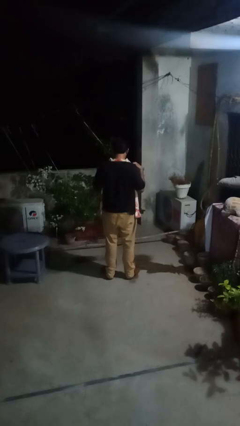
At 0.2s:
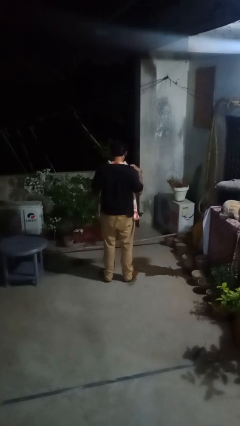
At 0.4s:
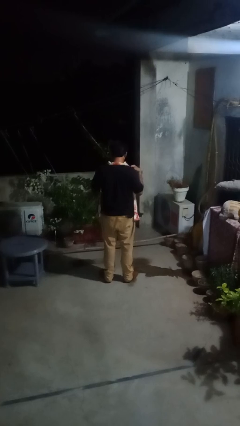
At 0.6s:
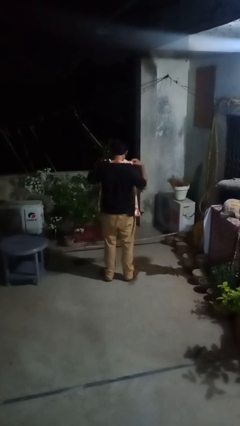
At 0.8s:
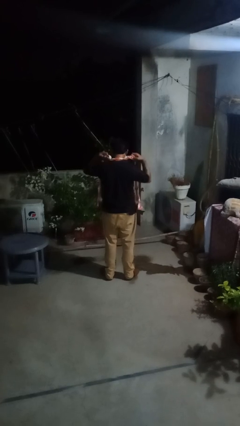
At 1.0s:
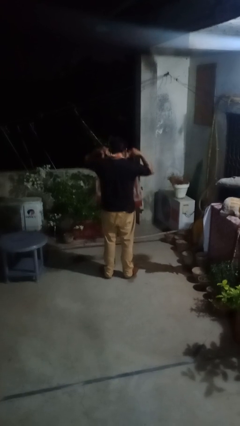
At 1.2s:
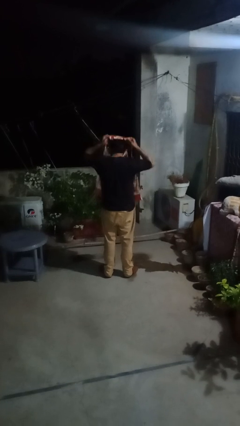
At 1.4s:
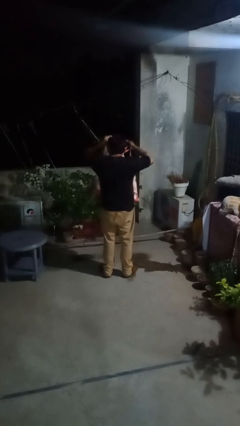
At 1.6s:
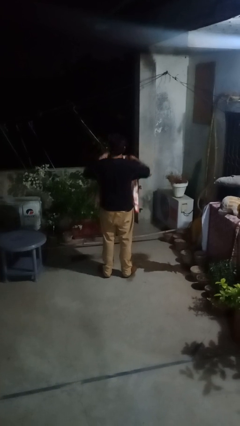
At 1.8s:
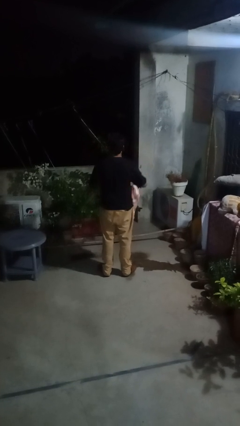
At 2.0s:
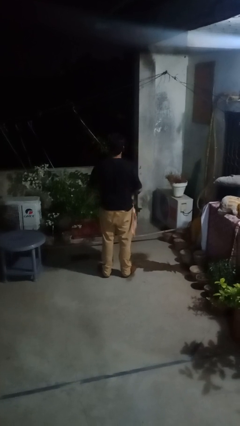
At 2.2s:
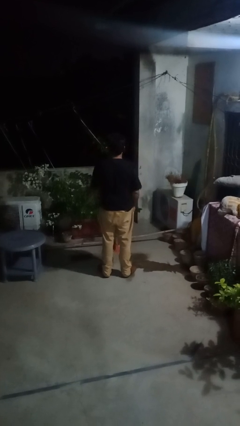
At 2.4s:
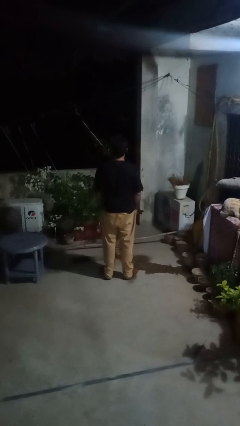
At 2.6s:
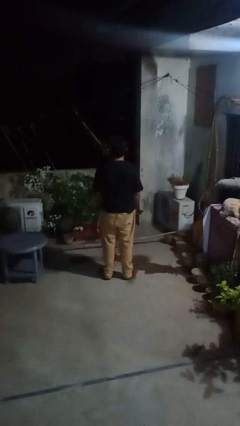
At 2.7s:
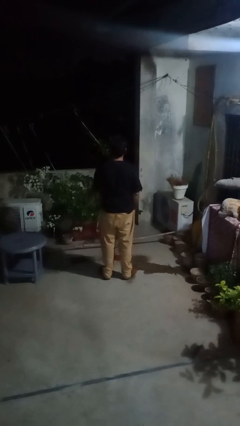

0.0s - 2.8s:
person takes off apron

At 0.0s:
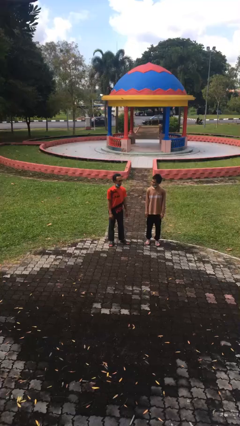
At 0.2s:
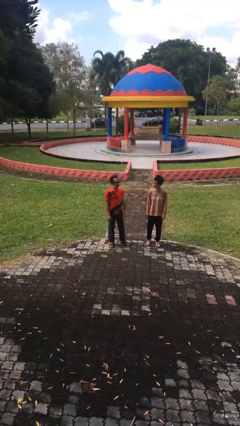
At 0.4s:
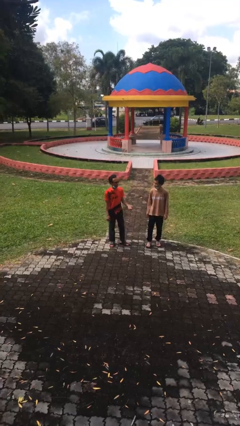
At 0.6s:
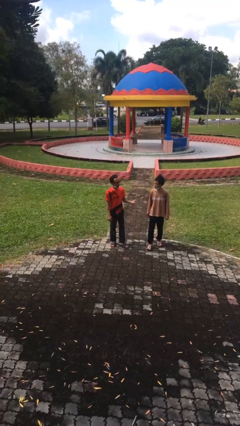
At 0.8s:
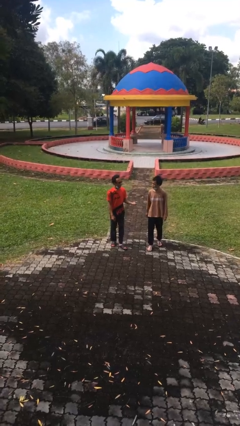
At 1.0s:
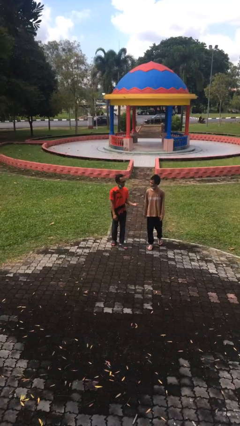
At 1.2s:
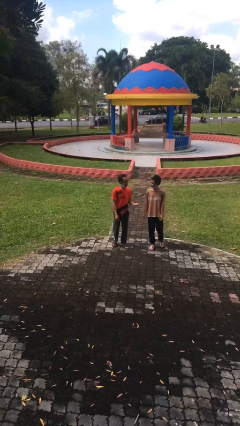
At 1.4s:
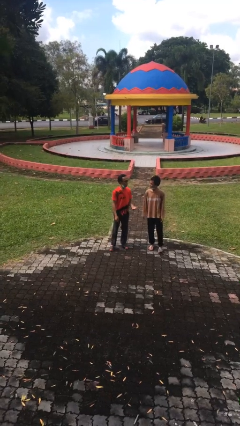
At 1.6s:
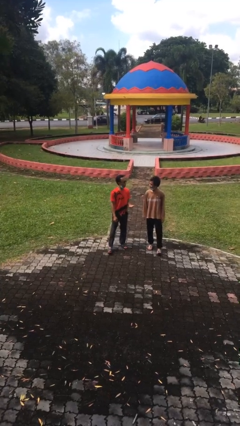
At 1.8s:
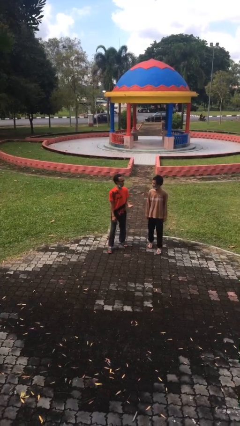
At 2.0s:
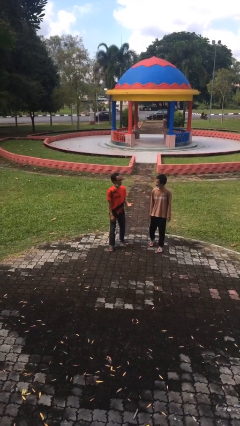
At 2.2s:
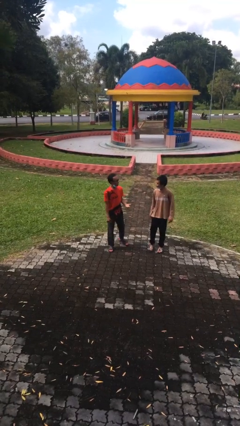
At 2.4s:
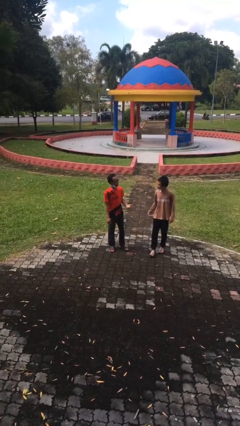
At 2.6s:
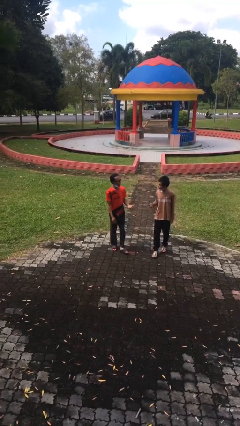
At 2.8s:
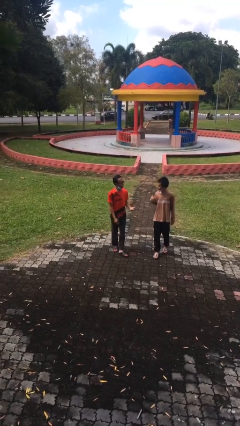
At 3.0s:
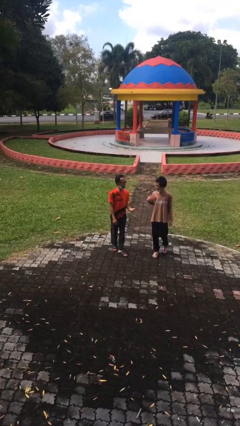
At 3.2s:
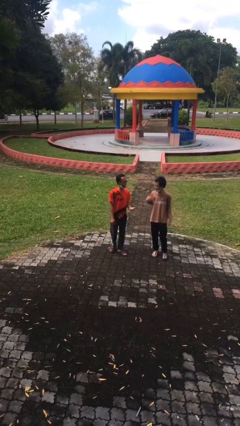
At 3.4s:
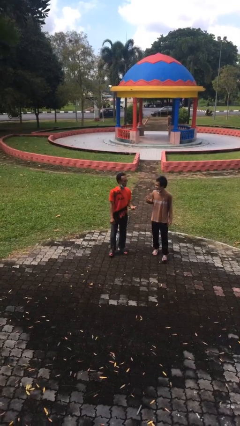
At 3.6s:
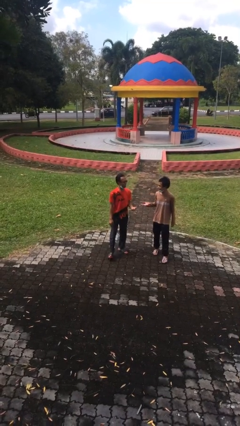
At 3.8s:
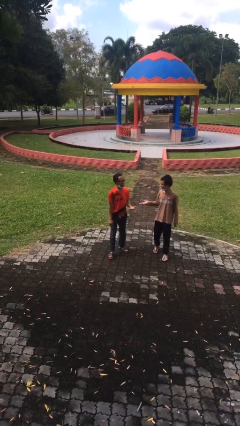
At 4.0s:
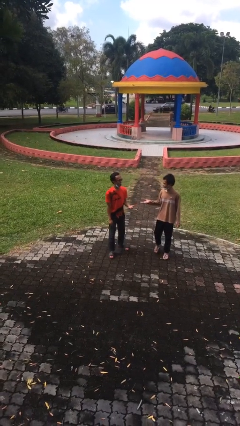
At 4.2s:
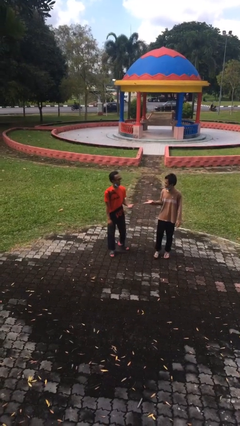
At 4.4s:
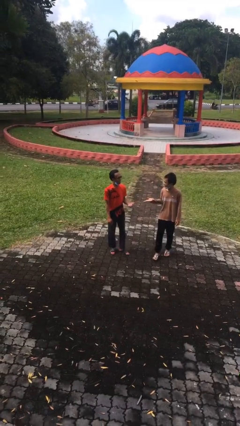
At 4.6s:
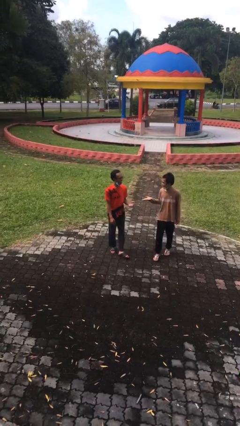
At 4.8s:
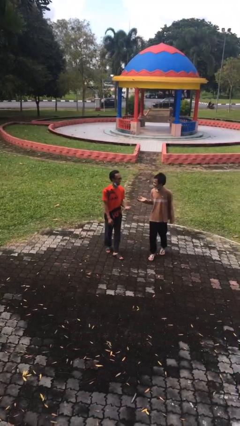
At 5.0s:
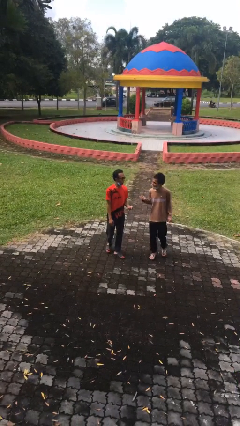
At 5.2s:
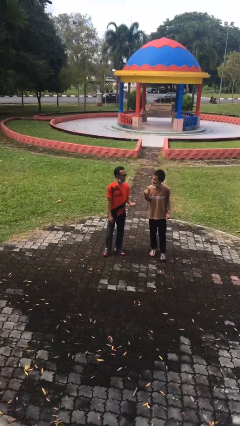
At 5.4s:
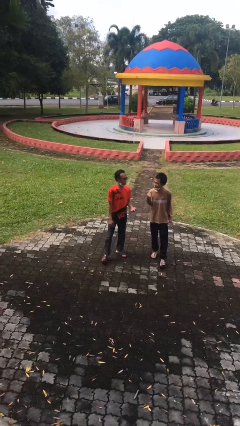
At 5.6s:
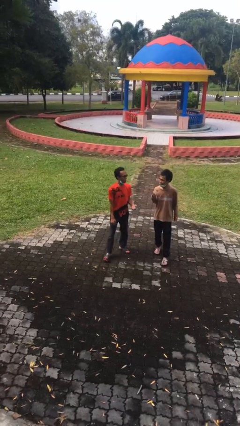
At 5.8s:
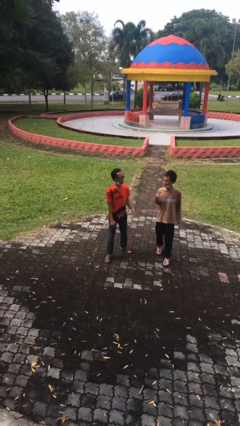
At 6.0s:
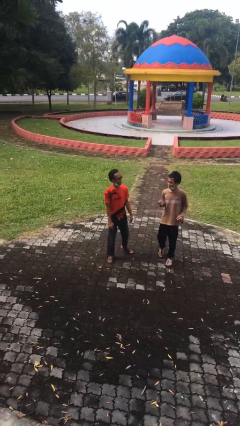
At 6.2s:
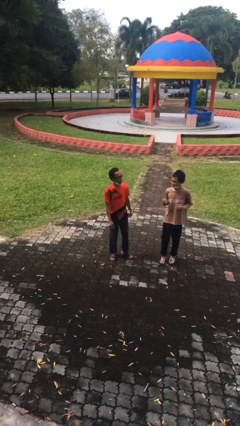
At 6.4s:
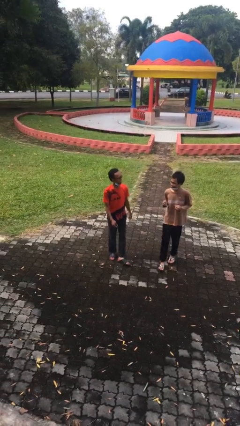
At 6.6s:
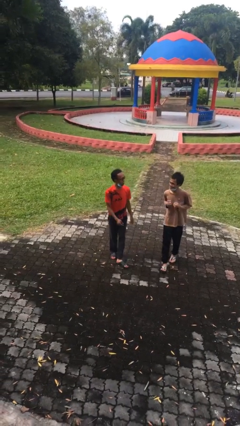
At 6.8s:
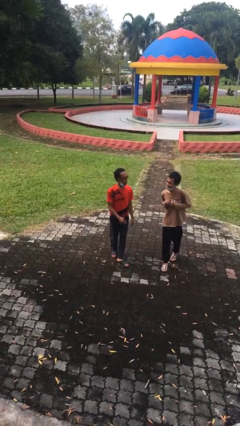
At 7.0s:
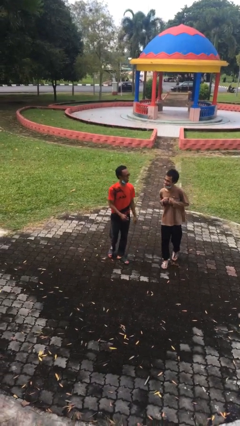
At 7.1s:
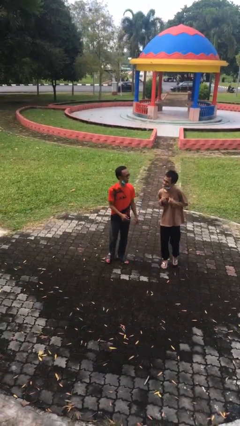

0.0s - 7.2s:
person talks to person

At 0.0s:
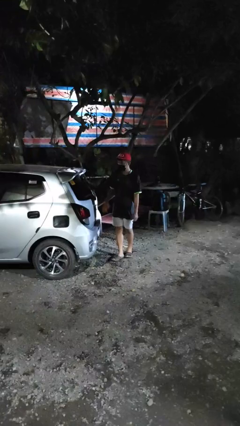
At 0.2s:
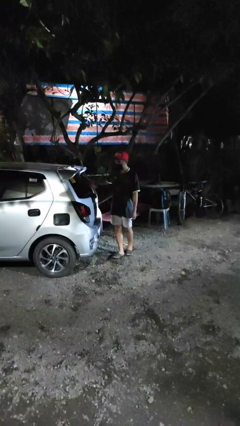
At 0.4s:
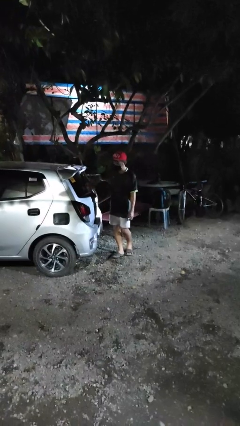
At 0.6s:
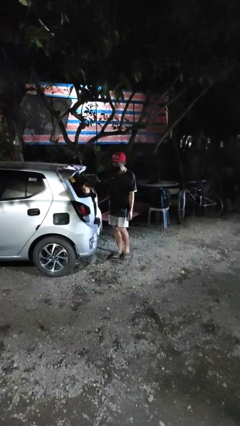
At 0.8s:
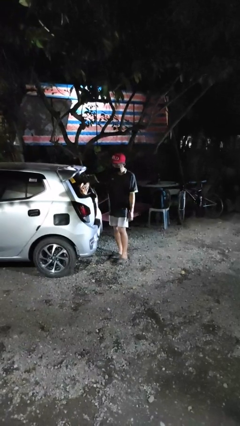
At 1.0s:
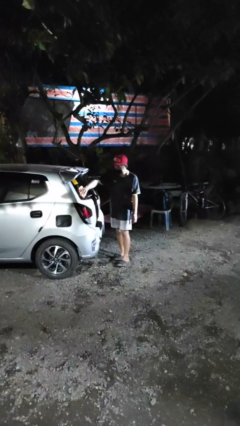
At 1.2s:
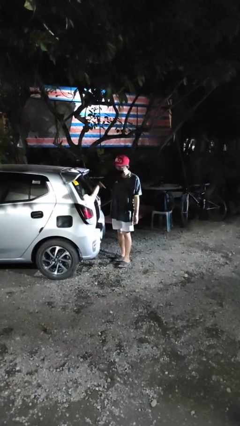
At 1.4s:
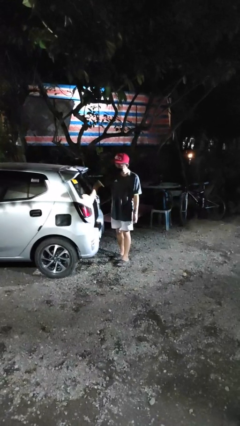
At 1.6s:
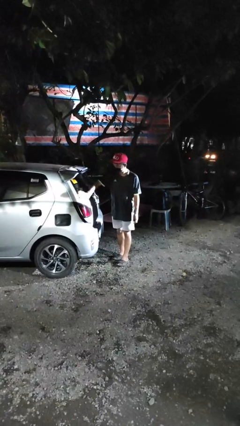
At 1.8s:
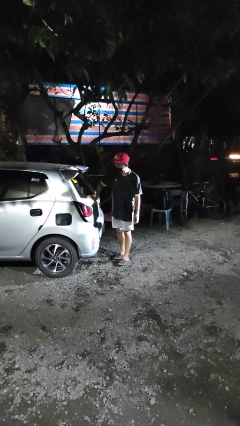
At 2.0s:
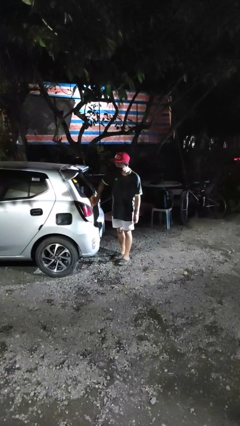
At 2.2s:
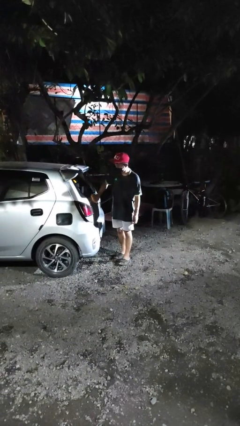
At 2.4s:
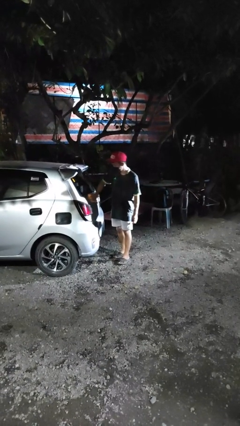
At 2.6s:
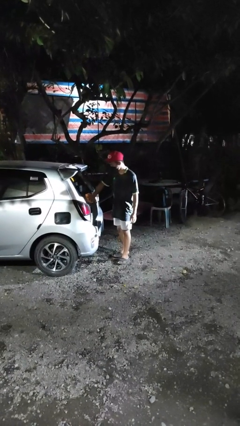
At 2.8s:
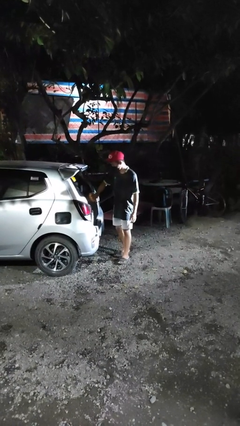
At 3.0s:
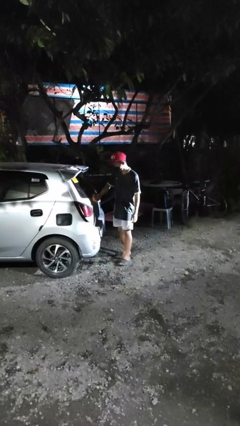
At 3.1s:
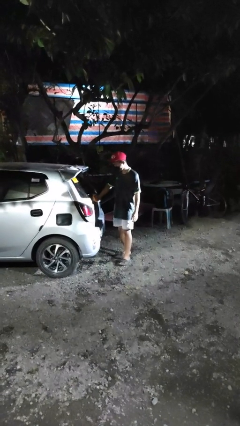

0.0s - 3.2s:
person polishes car with rag

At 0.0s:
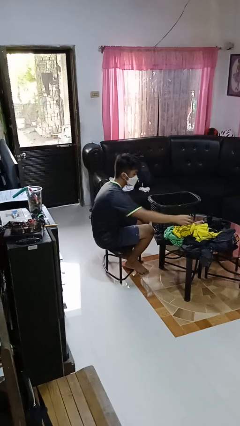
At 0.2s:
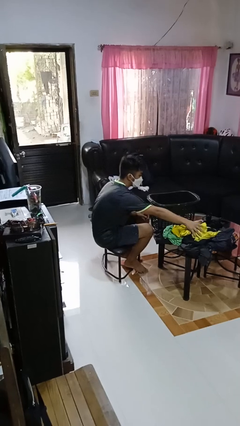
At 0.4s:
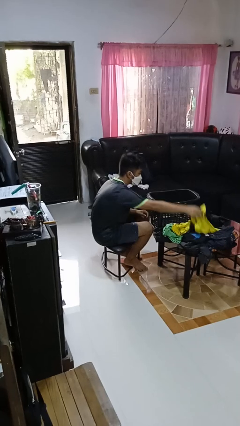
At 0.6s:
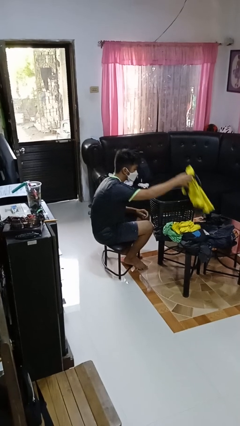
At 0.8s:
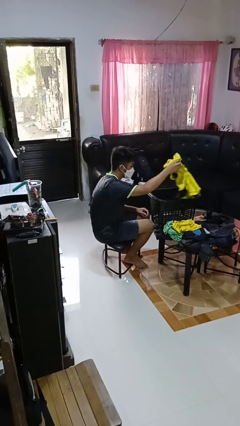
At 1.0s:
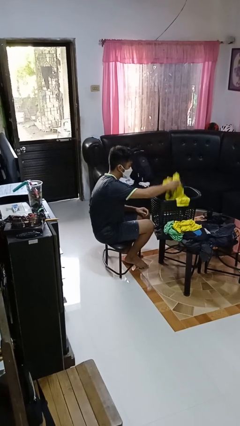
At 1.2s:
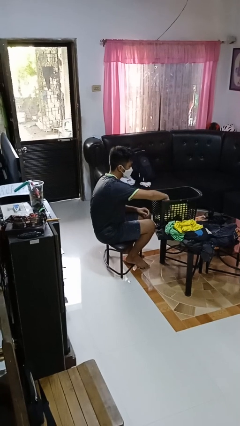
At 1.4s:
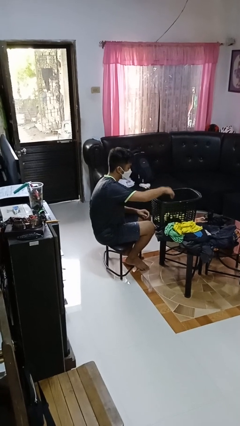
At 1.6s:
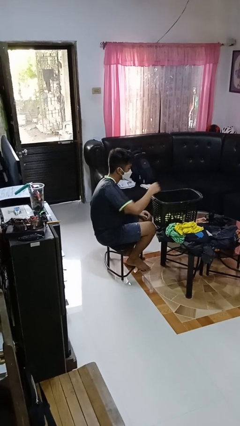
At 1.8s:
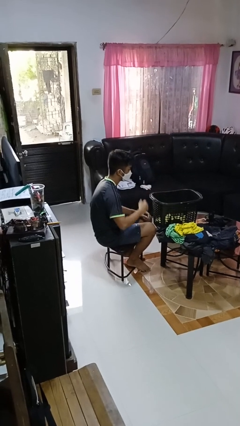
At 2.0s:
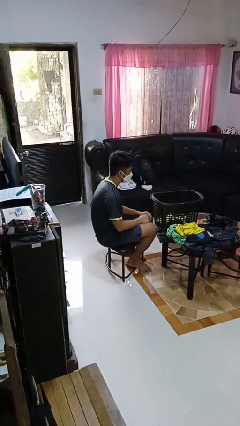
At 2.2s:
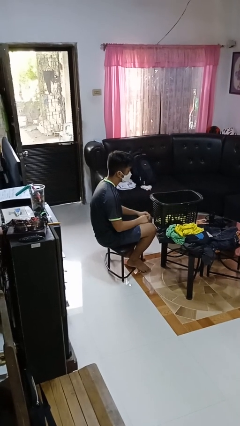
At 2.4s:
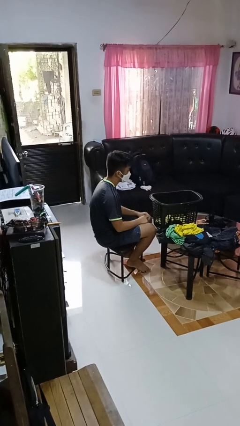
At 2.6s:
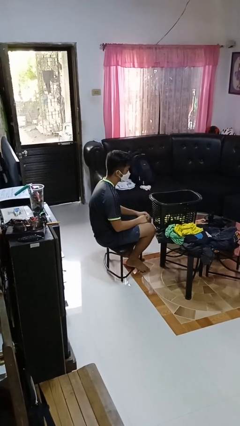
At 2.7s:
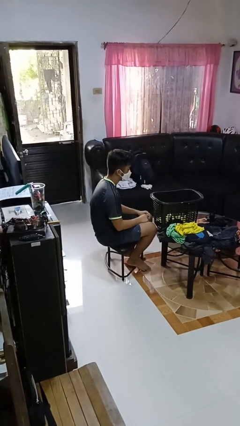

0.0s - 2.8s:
person puts object into basket

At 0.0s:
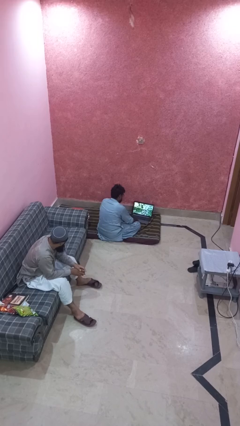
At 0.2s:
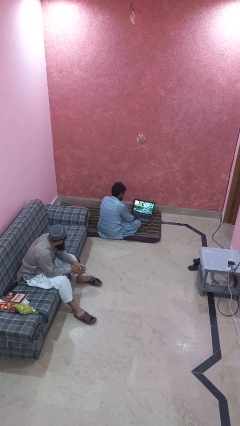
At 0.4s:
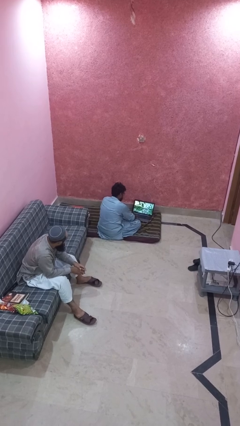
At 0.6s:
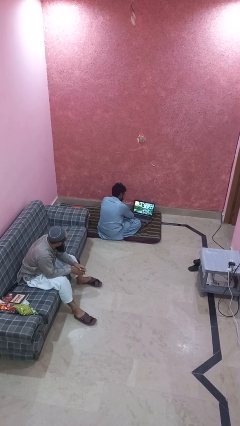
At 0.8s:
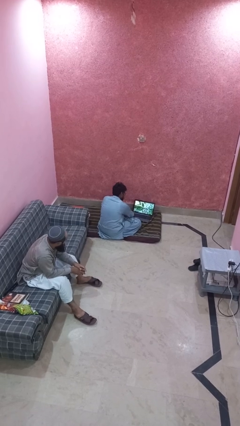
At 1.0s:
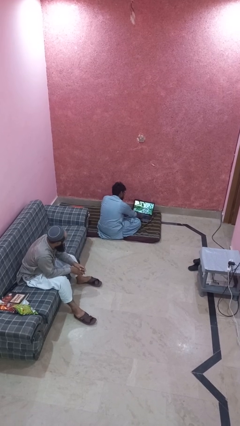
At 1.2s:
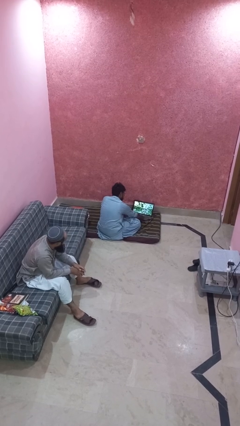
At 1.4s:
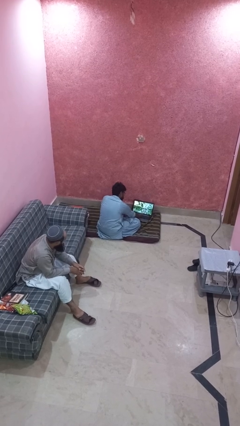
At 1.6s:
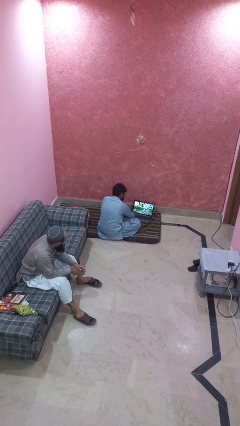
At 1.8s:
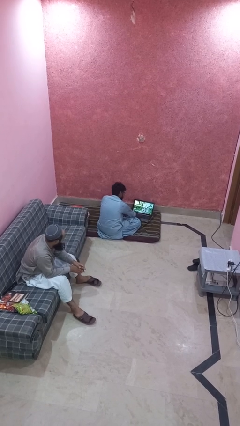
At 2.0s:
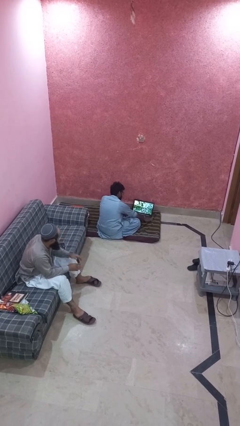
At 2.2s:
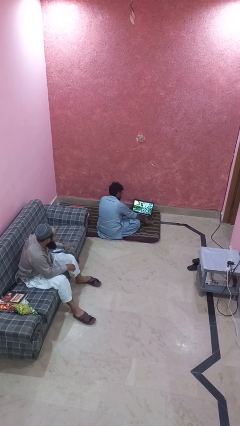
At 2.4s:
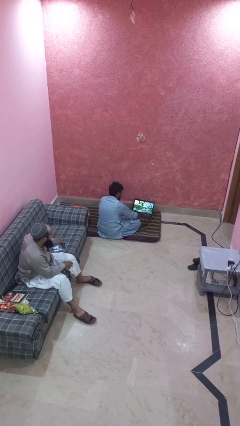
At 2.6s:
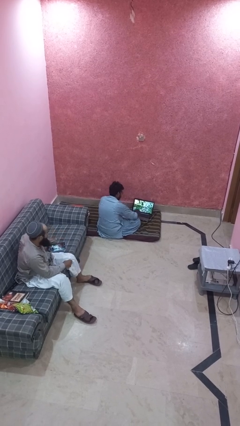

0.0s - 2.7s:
person waves hand over object
